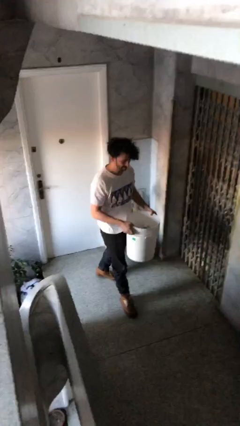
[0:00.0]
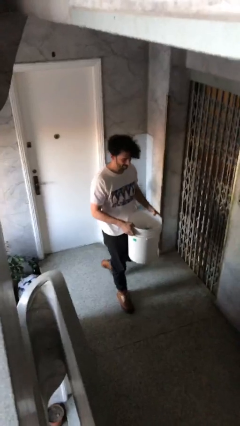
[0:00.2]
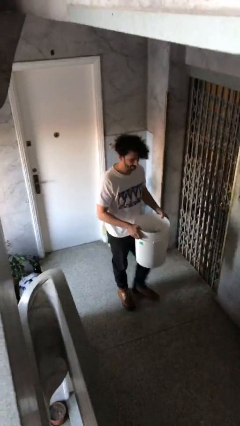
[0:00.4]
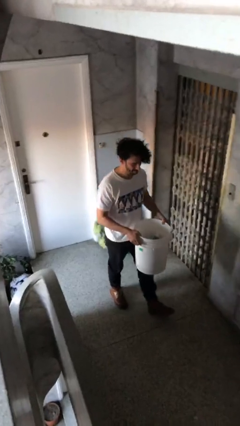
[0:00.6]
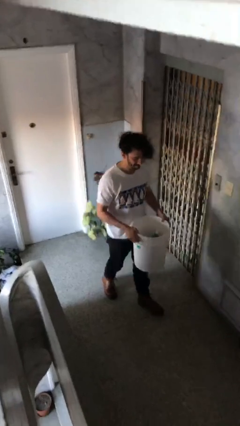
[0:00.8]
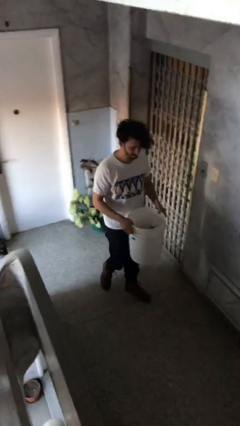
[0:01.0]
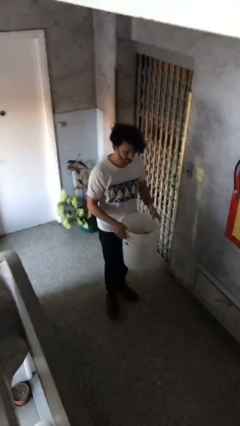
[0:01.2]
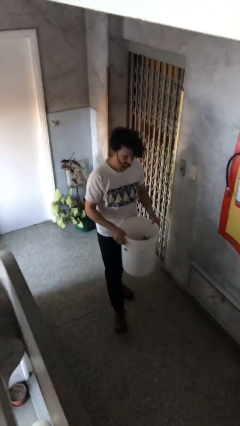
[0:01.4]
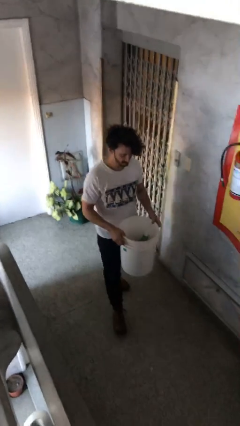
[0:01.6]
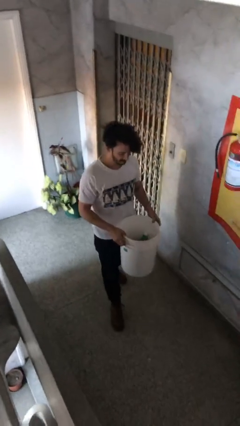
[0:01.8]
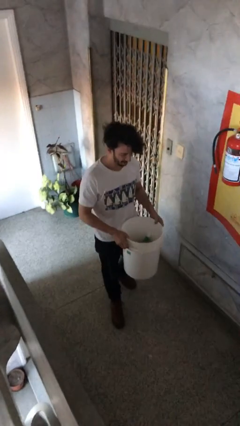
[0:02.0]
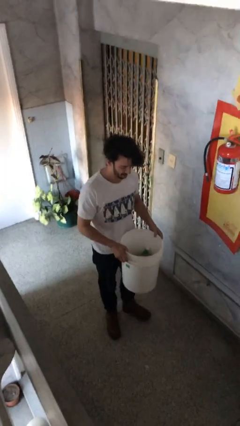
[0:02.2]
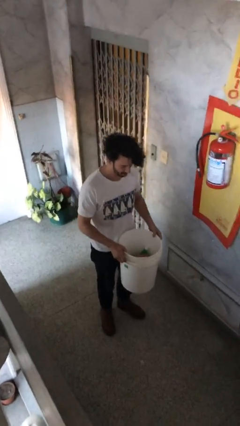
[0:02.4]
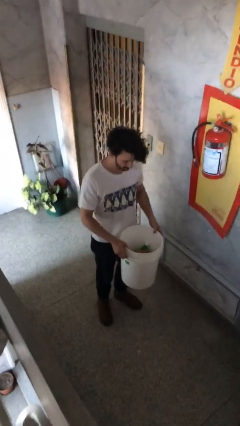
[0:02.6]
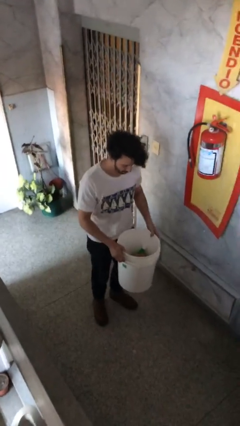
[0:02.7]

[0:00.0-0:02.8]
person carries heavy object

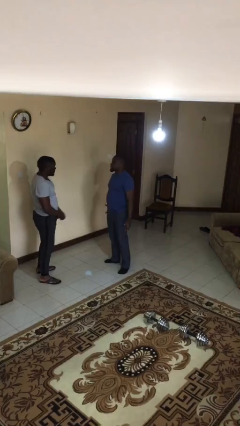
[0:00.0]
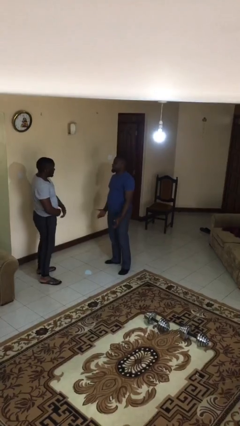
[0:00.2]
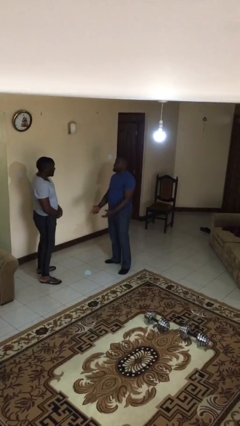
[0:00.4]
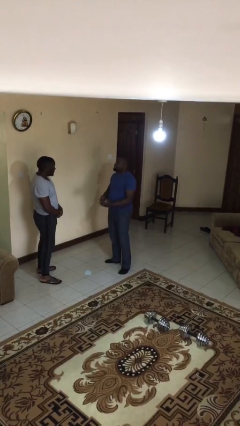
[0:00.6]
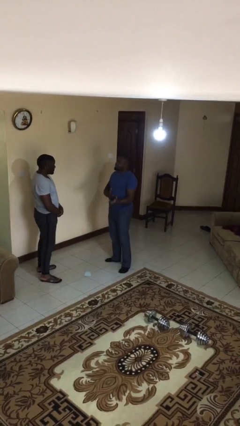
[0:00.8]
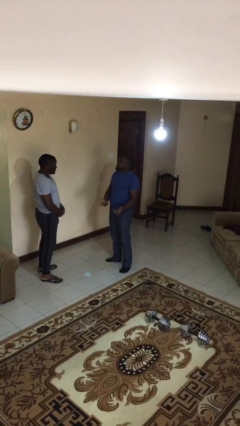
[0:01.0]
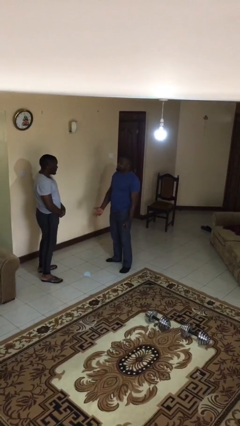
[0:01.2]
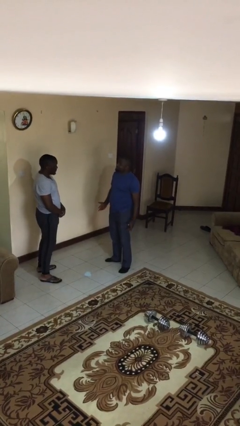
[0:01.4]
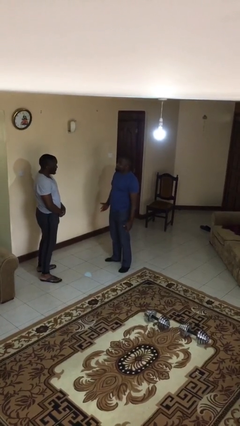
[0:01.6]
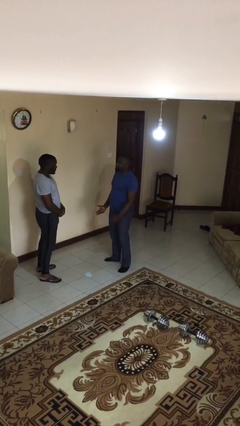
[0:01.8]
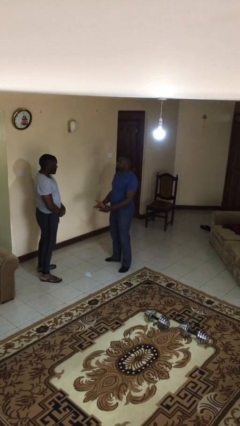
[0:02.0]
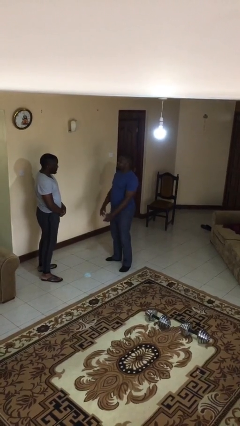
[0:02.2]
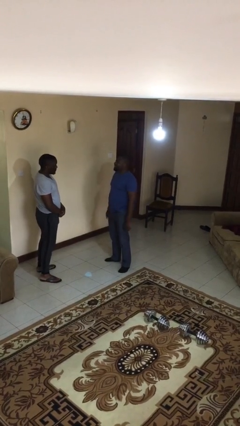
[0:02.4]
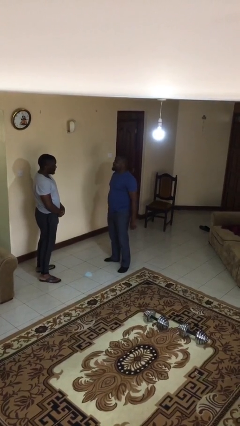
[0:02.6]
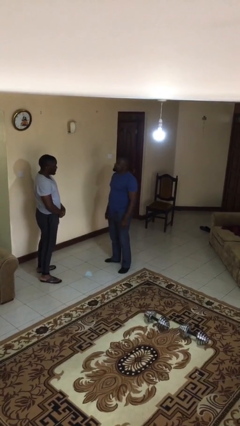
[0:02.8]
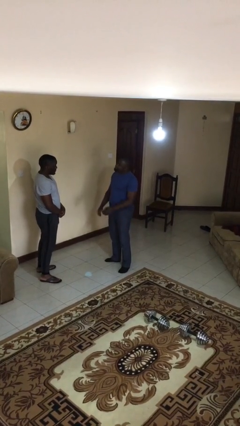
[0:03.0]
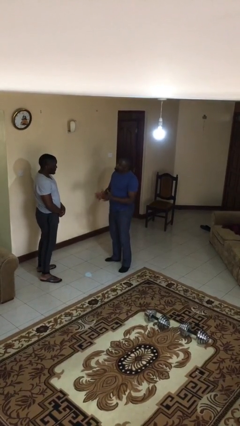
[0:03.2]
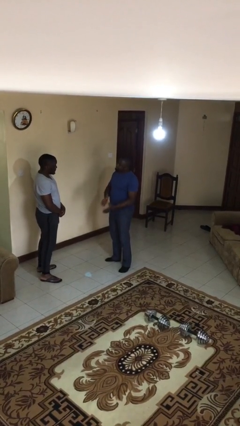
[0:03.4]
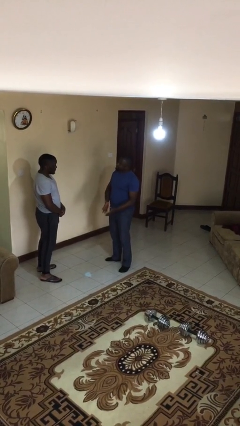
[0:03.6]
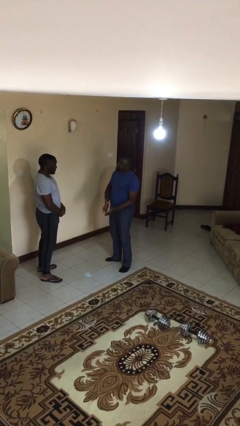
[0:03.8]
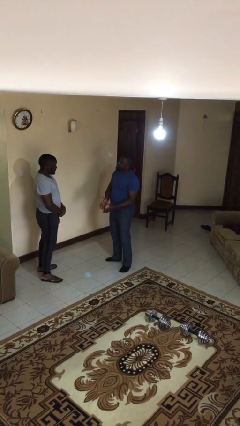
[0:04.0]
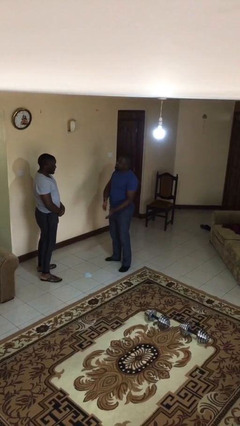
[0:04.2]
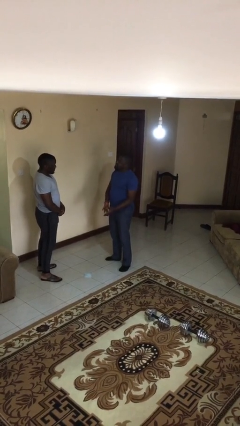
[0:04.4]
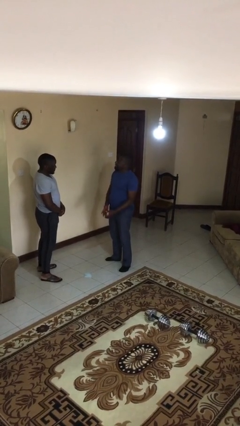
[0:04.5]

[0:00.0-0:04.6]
person talks to person

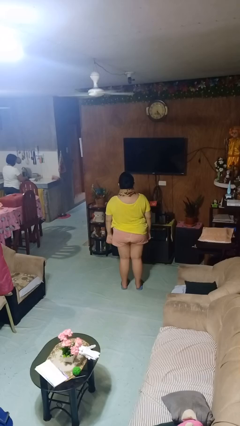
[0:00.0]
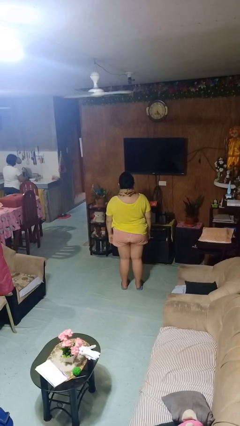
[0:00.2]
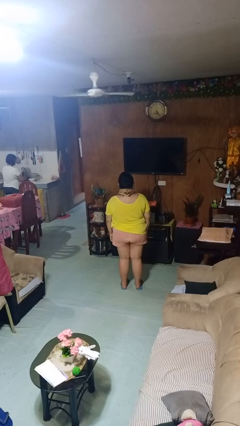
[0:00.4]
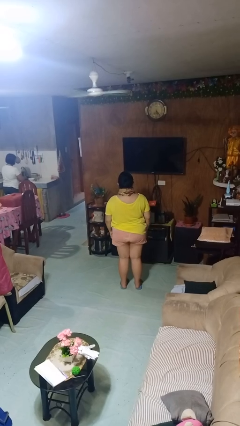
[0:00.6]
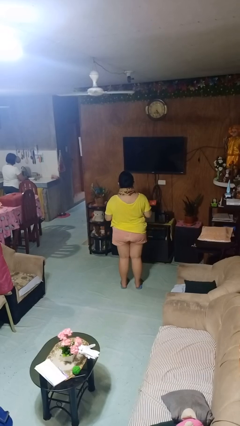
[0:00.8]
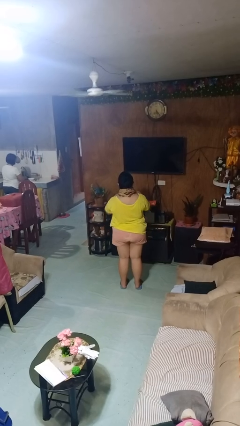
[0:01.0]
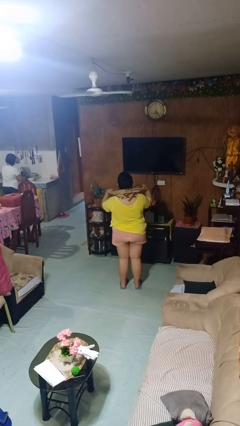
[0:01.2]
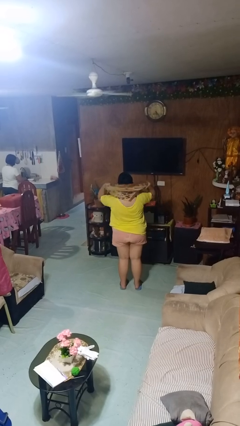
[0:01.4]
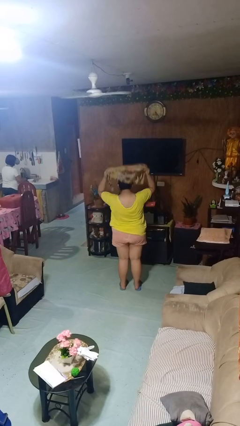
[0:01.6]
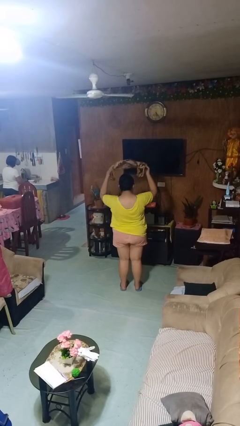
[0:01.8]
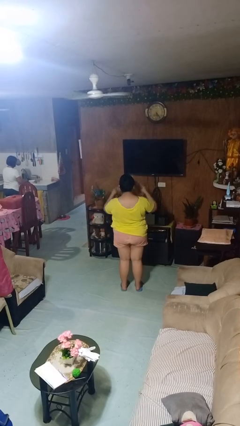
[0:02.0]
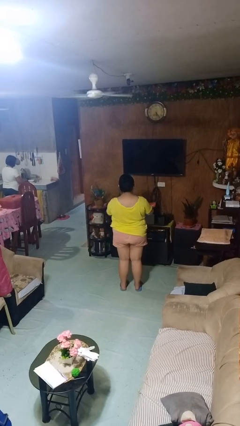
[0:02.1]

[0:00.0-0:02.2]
person takes off scarf

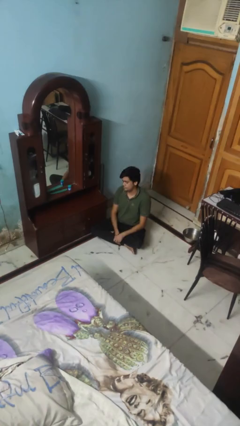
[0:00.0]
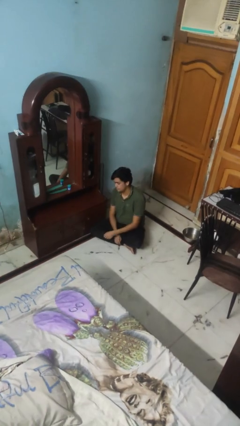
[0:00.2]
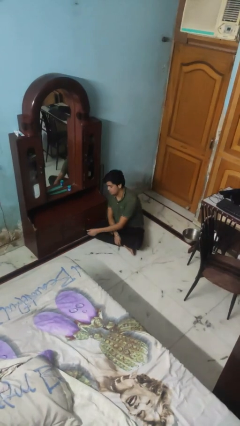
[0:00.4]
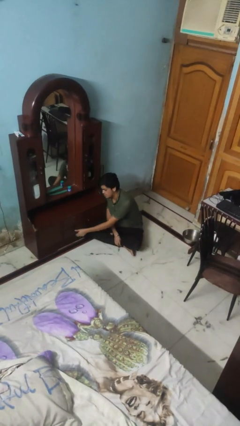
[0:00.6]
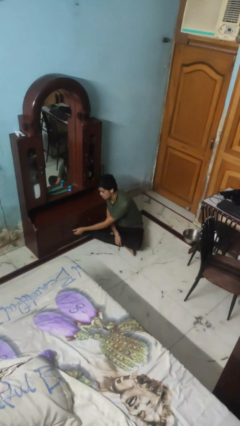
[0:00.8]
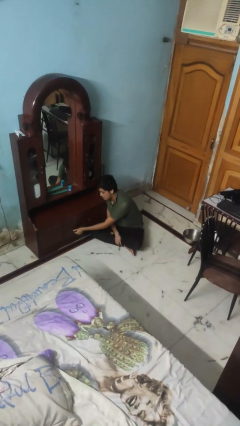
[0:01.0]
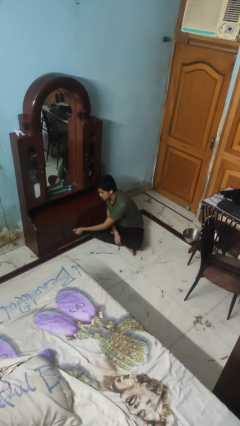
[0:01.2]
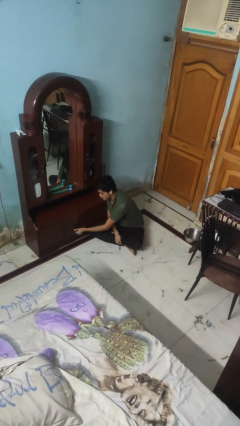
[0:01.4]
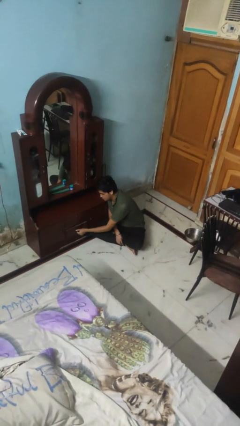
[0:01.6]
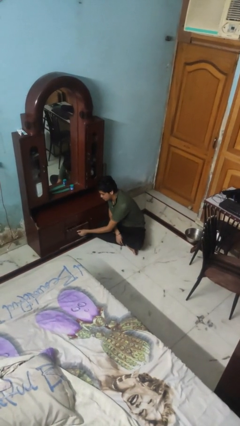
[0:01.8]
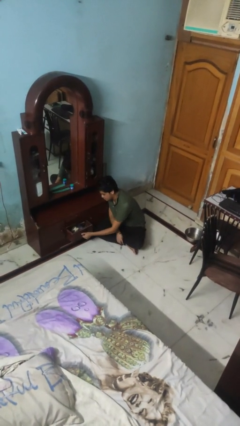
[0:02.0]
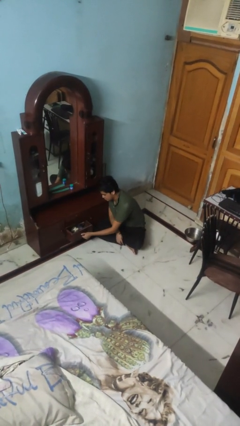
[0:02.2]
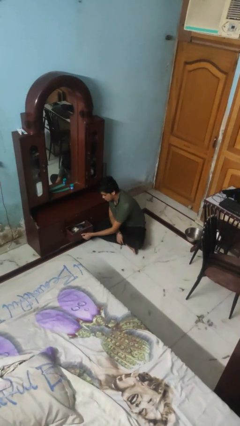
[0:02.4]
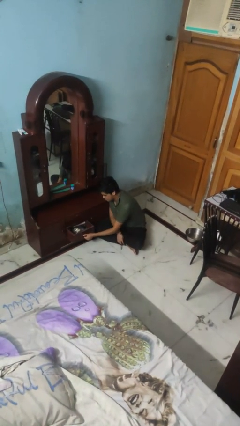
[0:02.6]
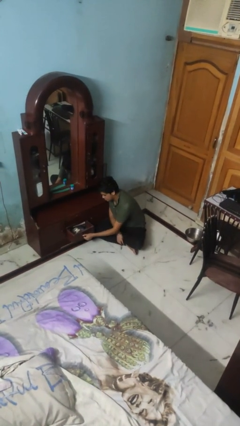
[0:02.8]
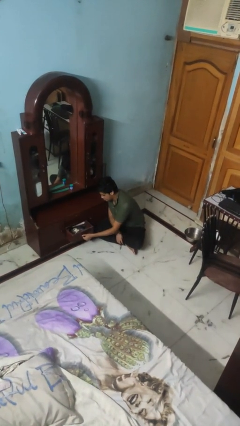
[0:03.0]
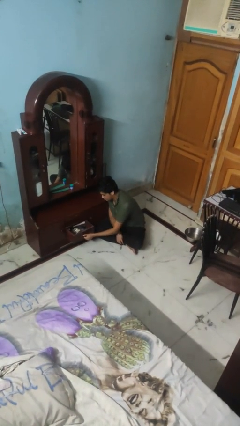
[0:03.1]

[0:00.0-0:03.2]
person opens dresser drawer

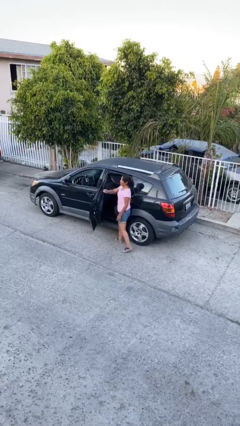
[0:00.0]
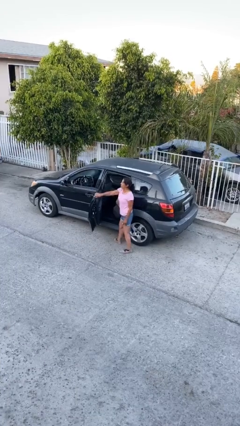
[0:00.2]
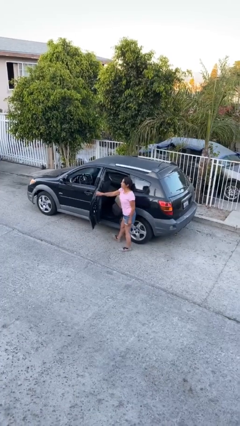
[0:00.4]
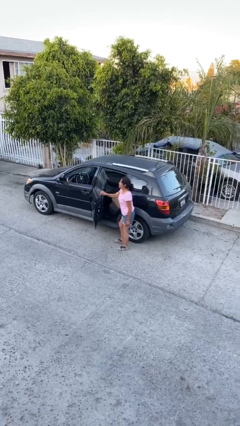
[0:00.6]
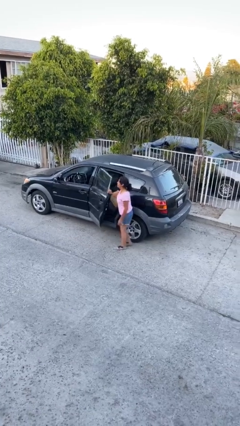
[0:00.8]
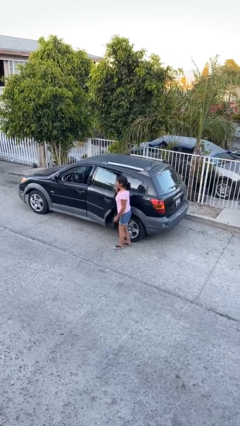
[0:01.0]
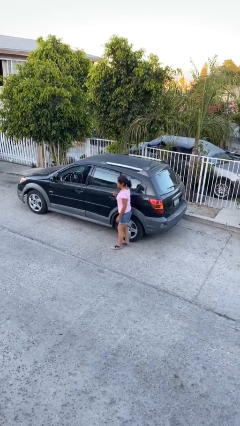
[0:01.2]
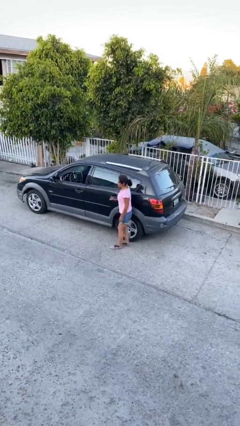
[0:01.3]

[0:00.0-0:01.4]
person closes car door

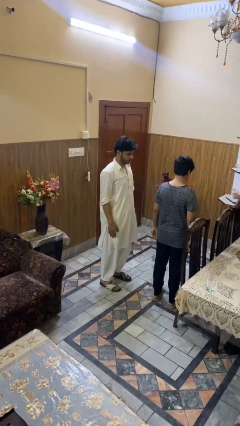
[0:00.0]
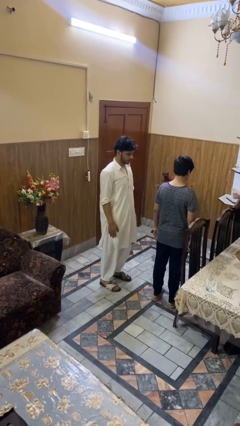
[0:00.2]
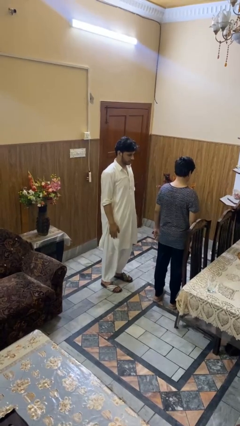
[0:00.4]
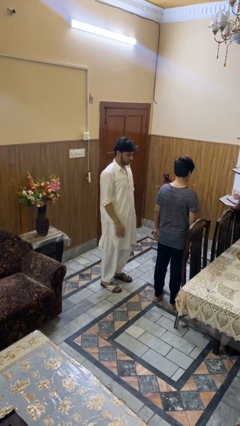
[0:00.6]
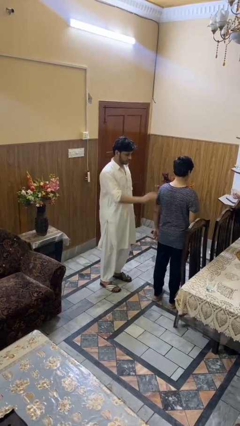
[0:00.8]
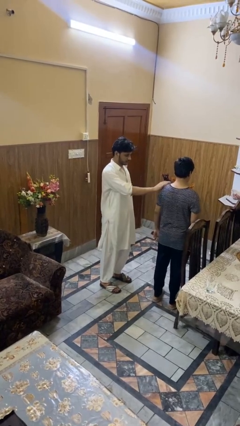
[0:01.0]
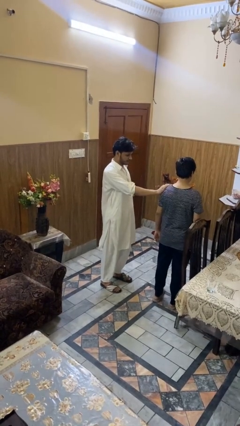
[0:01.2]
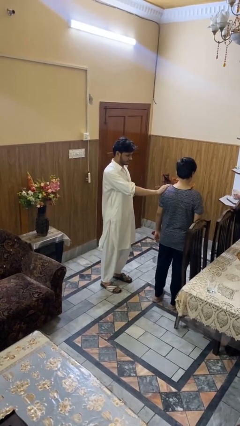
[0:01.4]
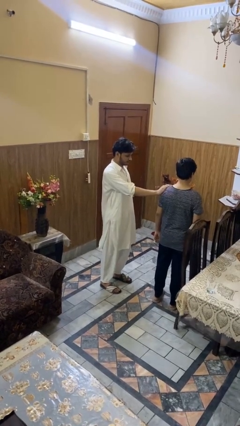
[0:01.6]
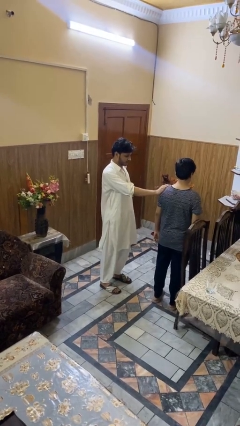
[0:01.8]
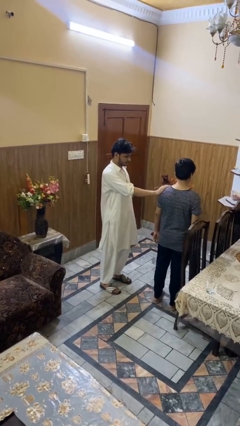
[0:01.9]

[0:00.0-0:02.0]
person grabs person by shoulder

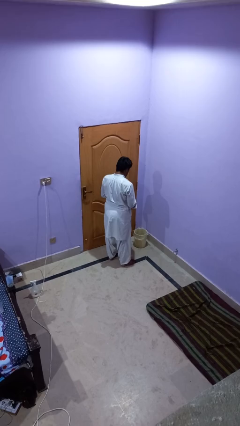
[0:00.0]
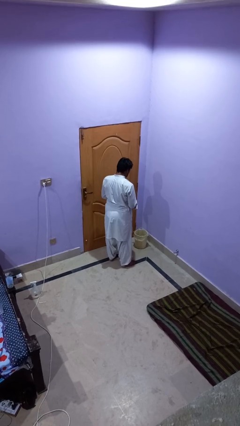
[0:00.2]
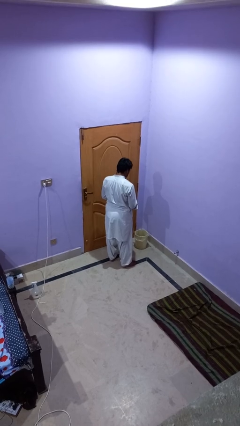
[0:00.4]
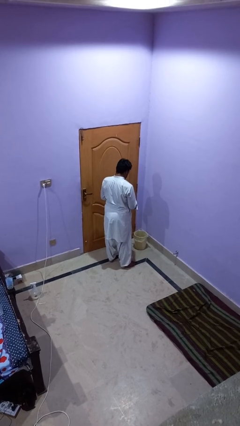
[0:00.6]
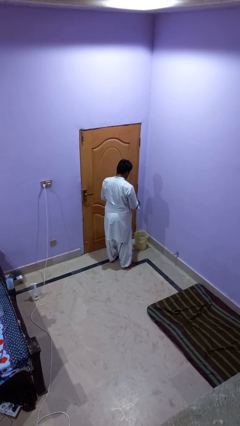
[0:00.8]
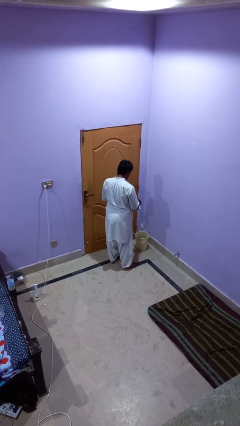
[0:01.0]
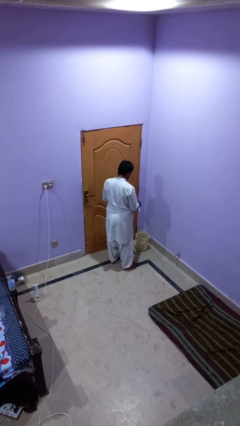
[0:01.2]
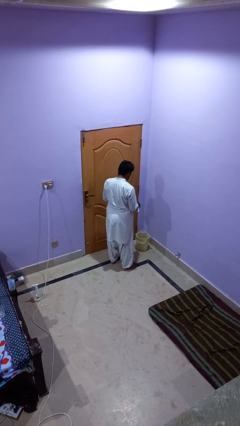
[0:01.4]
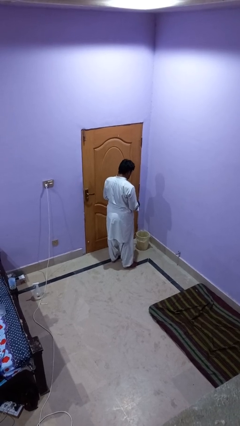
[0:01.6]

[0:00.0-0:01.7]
person discards trash
